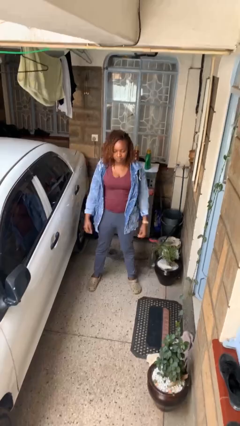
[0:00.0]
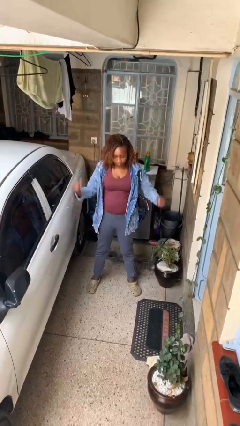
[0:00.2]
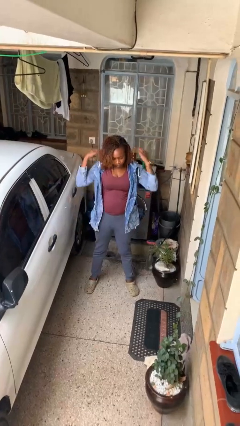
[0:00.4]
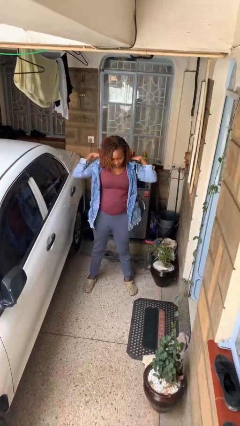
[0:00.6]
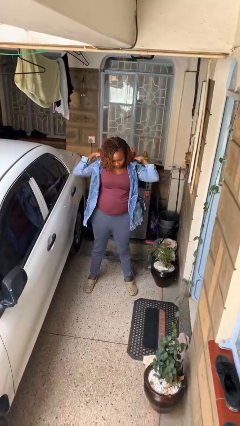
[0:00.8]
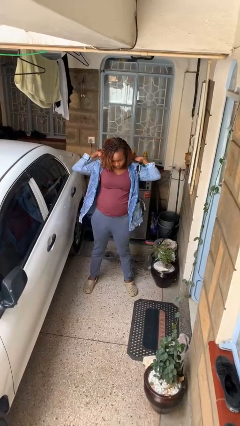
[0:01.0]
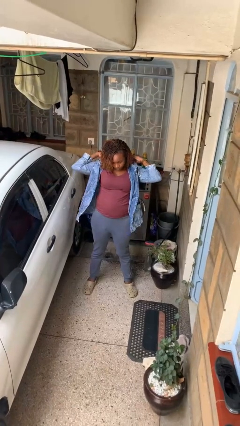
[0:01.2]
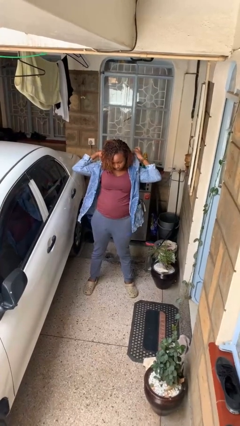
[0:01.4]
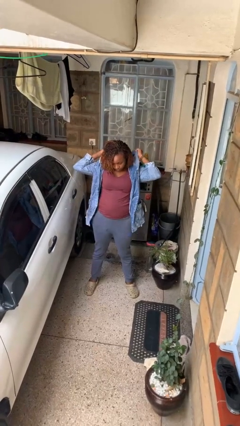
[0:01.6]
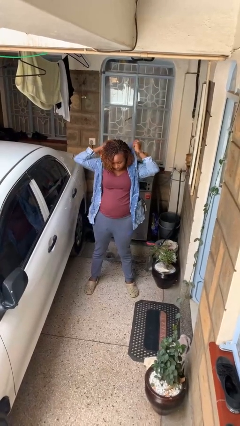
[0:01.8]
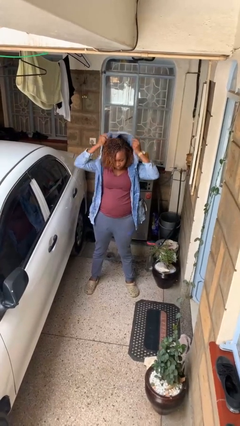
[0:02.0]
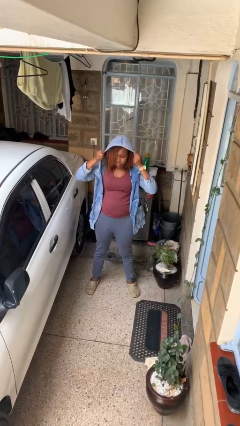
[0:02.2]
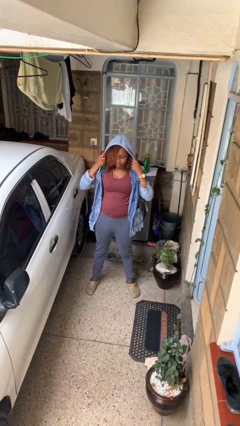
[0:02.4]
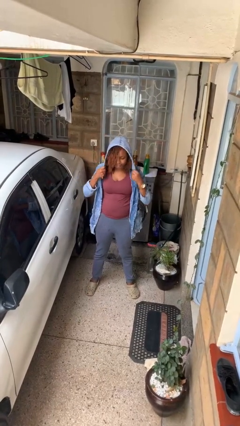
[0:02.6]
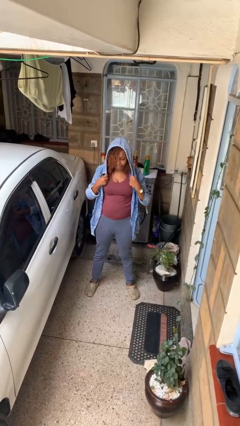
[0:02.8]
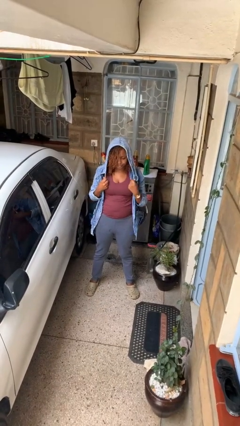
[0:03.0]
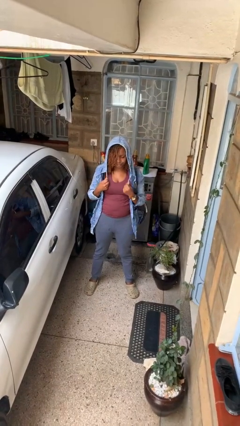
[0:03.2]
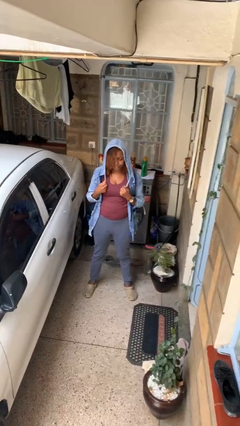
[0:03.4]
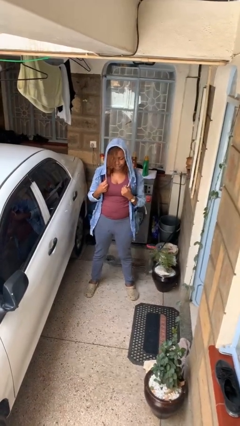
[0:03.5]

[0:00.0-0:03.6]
person puts on hoodie

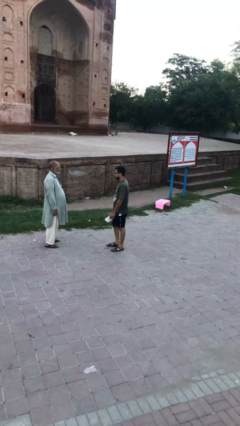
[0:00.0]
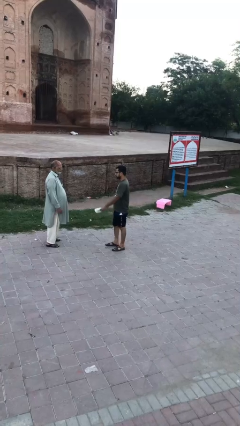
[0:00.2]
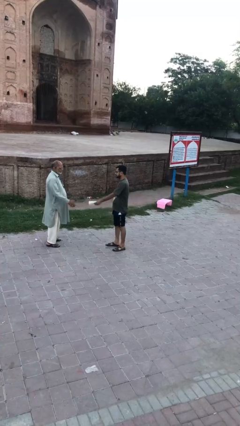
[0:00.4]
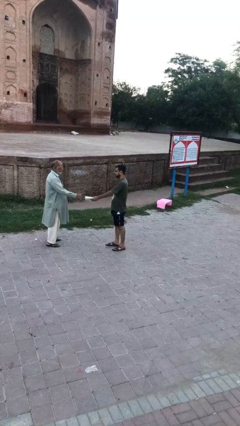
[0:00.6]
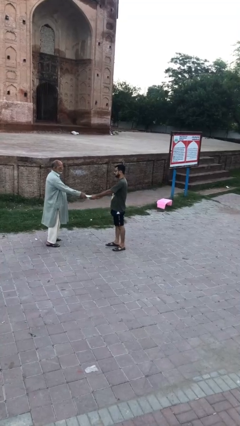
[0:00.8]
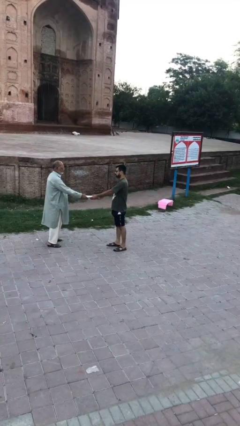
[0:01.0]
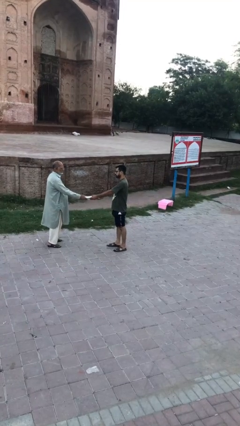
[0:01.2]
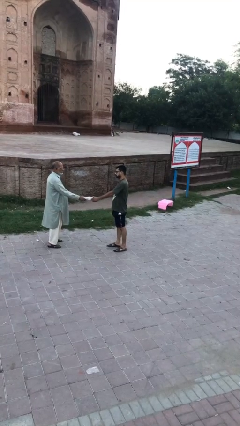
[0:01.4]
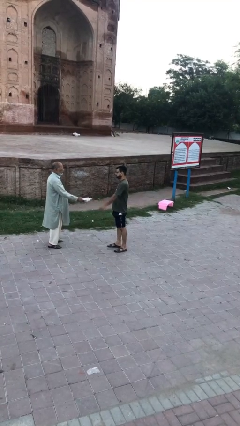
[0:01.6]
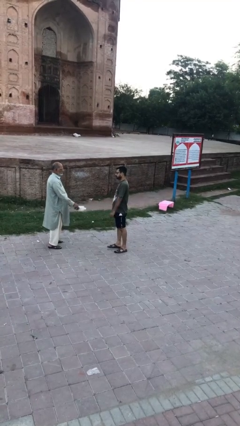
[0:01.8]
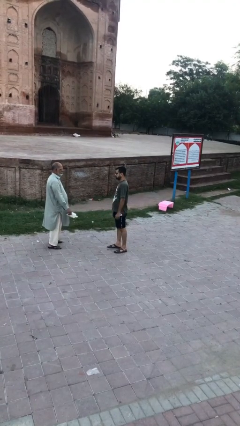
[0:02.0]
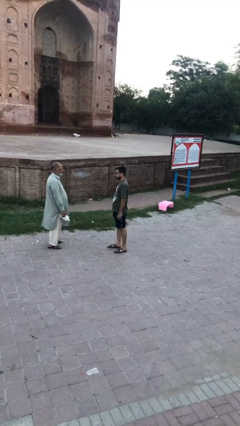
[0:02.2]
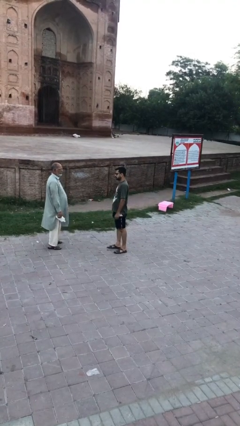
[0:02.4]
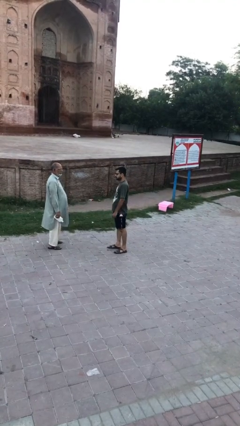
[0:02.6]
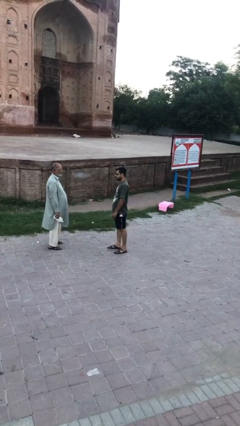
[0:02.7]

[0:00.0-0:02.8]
person transfers object to person

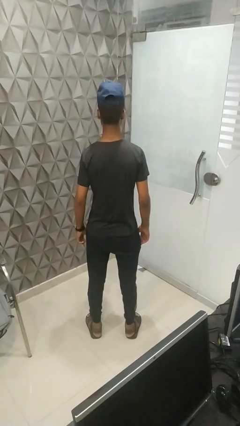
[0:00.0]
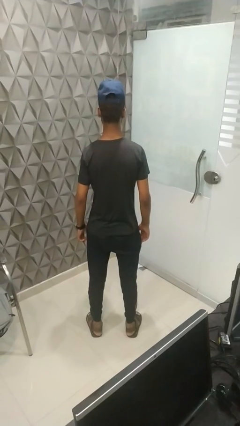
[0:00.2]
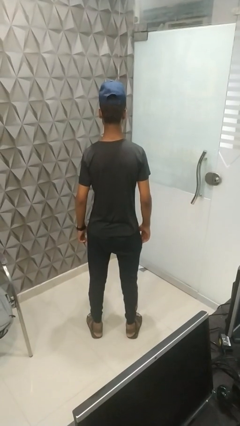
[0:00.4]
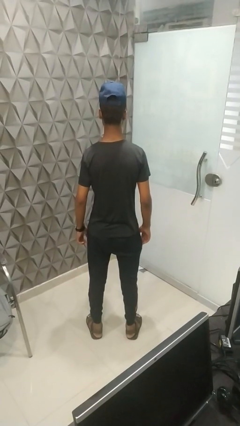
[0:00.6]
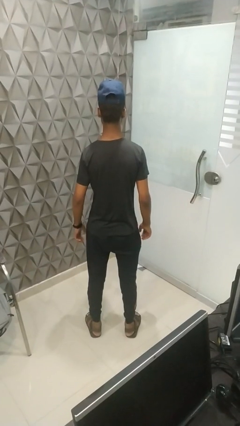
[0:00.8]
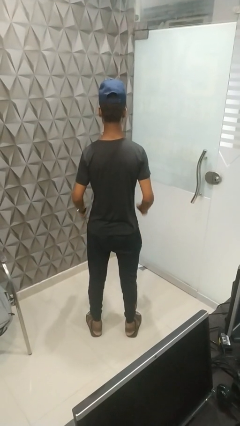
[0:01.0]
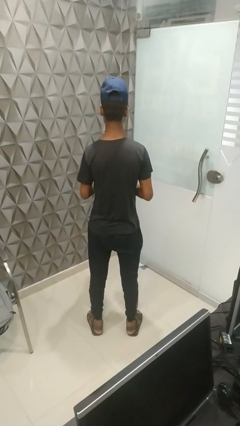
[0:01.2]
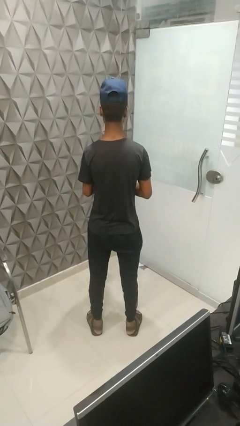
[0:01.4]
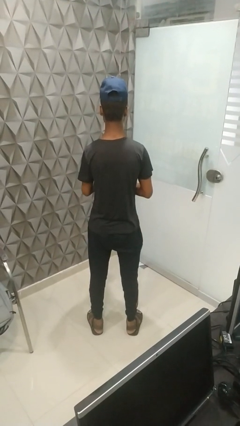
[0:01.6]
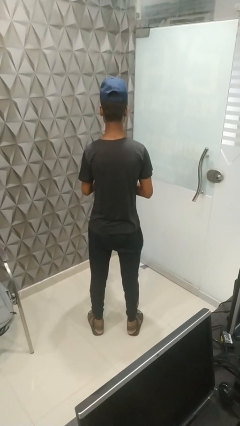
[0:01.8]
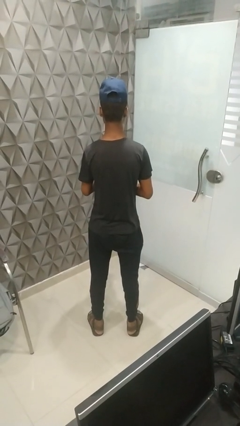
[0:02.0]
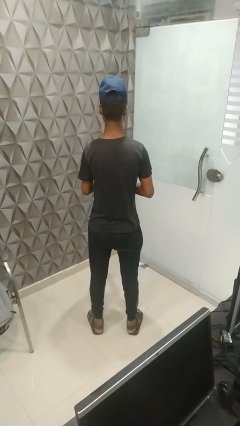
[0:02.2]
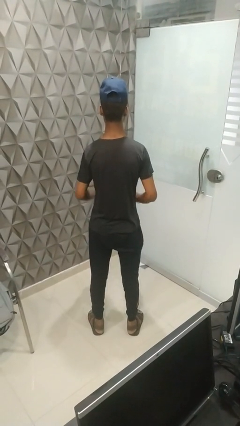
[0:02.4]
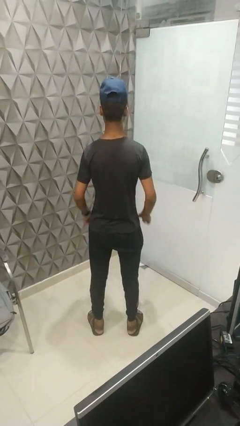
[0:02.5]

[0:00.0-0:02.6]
person claps hands

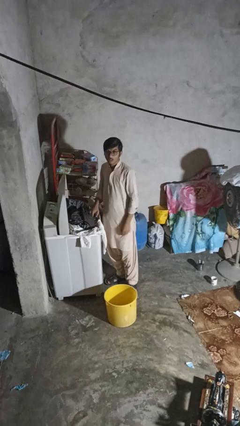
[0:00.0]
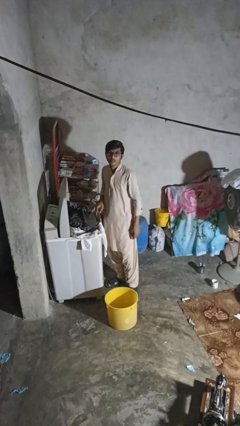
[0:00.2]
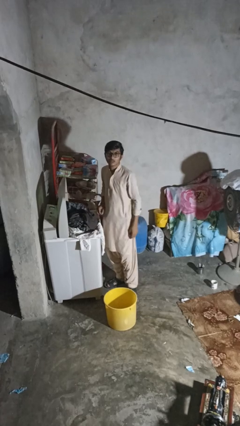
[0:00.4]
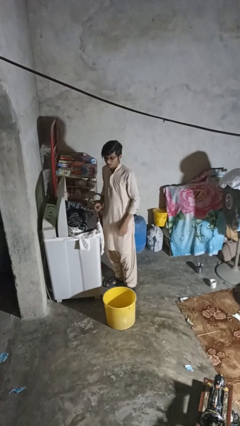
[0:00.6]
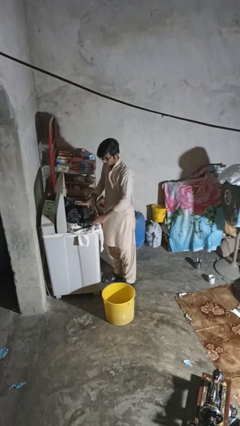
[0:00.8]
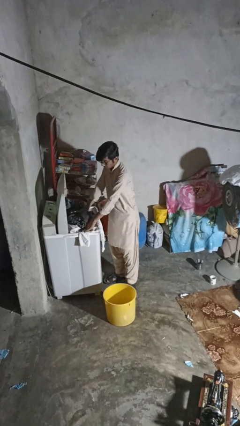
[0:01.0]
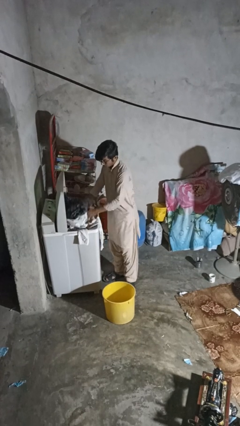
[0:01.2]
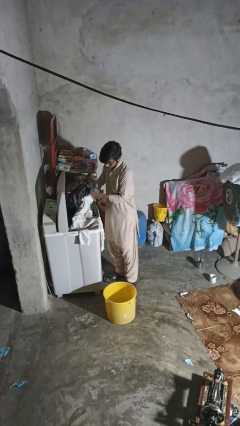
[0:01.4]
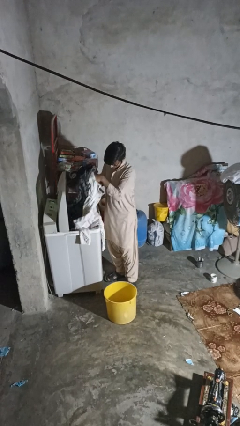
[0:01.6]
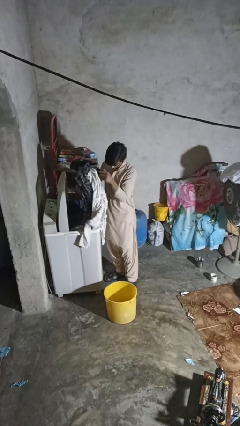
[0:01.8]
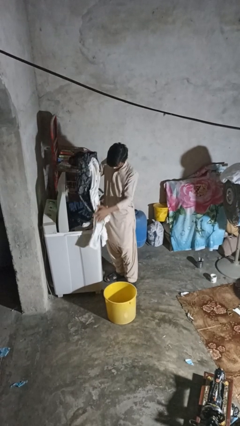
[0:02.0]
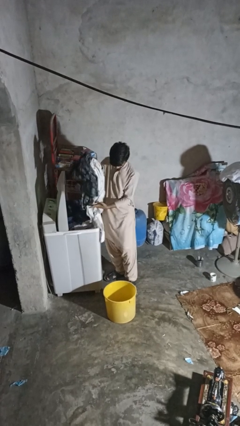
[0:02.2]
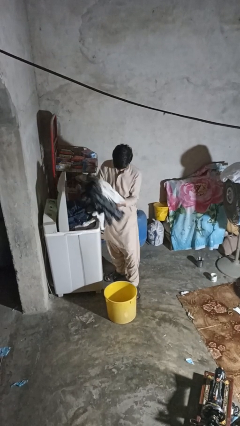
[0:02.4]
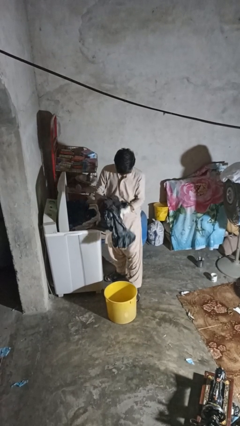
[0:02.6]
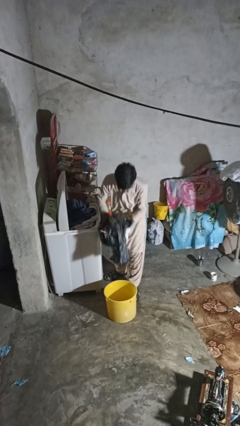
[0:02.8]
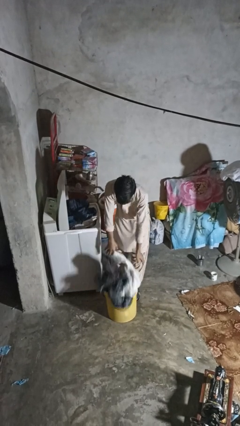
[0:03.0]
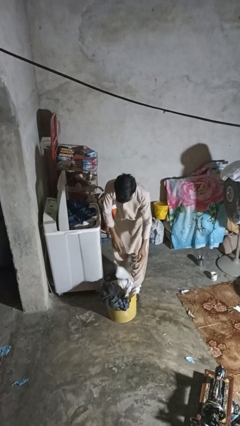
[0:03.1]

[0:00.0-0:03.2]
person unloads clotheswasher

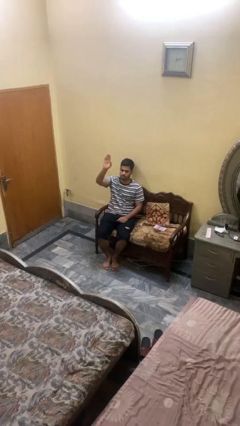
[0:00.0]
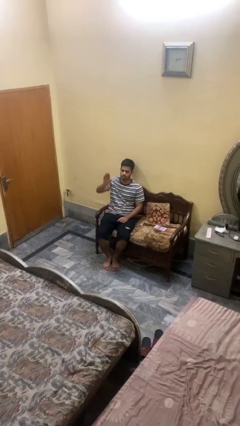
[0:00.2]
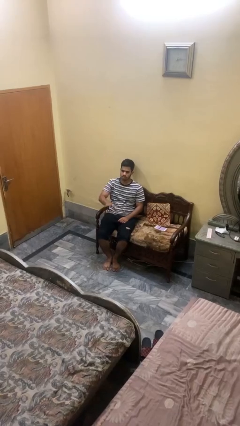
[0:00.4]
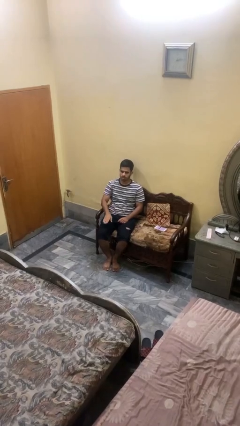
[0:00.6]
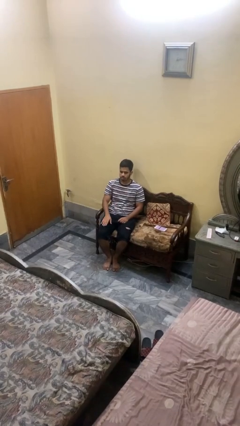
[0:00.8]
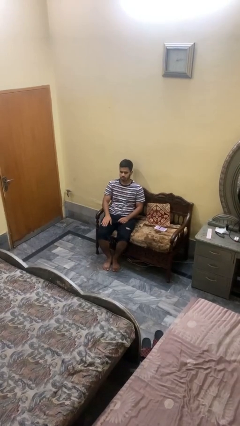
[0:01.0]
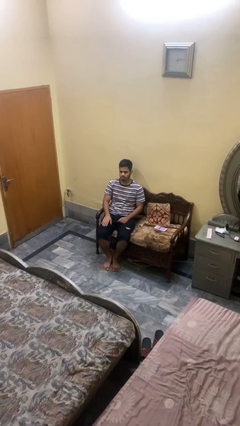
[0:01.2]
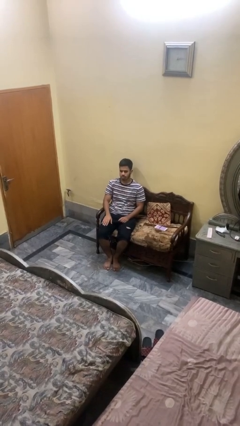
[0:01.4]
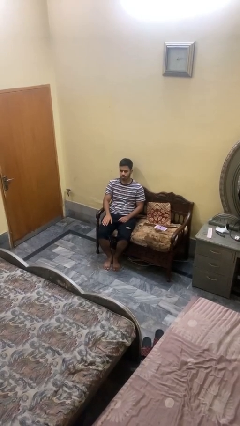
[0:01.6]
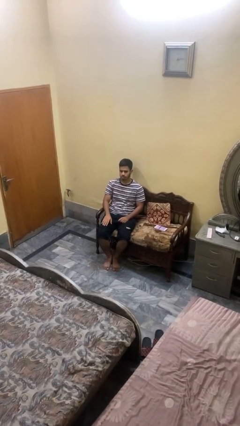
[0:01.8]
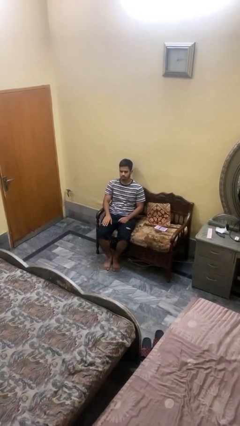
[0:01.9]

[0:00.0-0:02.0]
person gestures lower hand

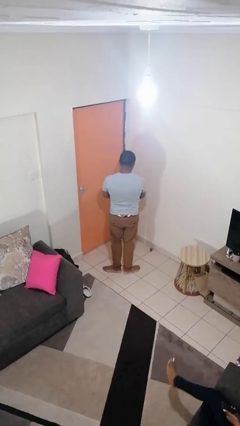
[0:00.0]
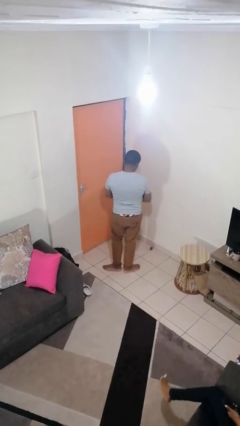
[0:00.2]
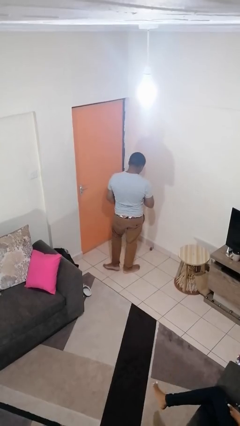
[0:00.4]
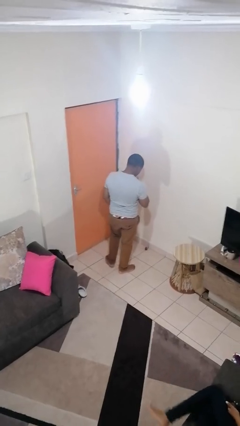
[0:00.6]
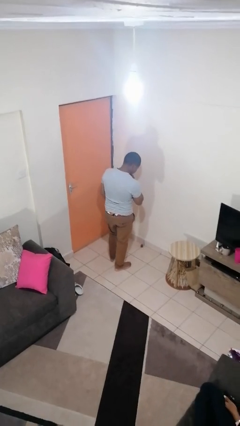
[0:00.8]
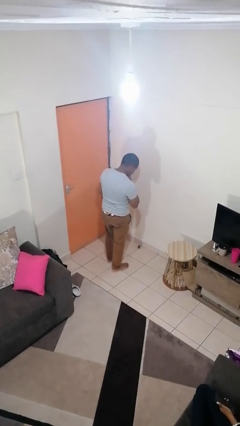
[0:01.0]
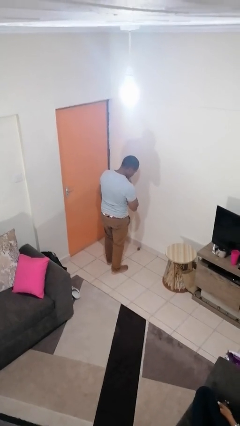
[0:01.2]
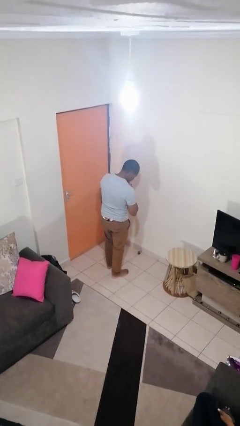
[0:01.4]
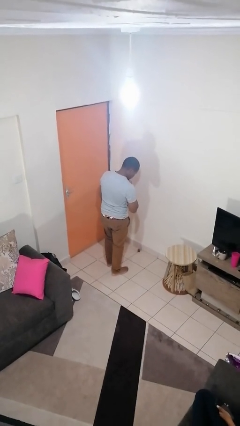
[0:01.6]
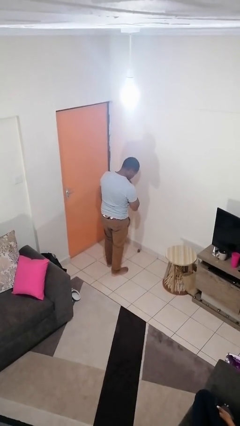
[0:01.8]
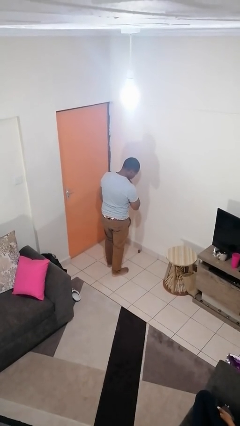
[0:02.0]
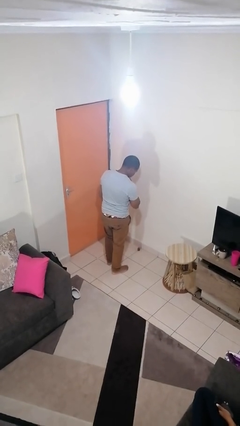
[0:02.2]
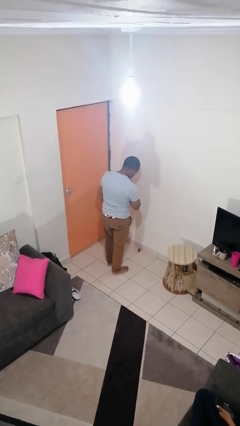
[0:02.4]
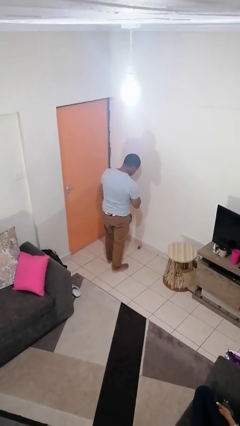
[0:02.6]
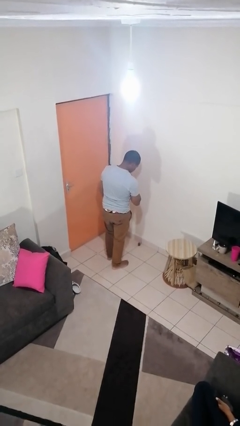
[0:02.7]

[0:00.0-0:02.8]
person strokes chin
